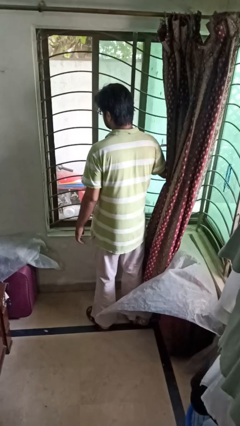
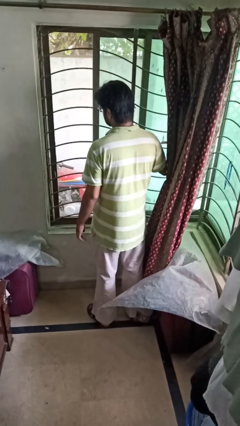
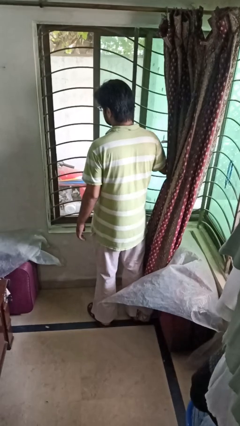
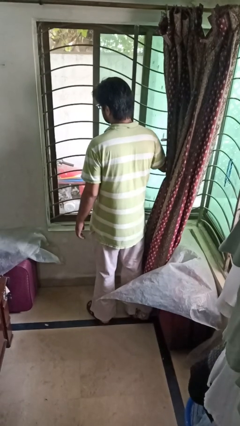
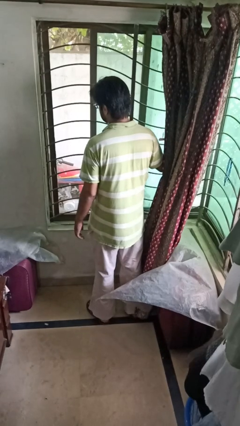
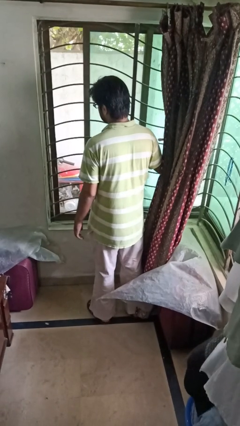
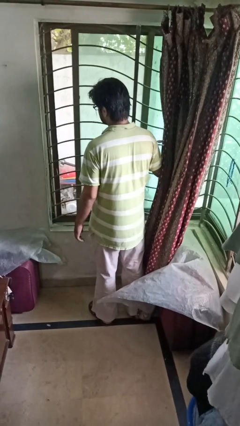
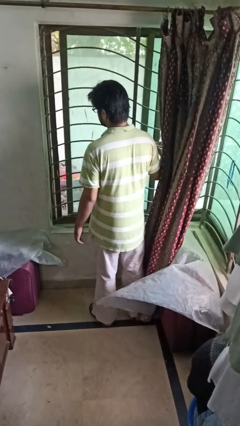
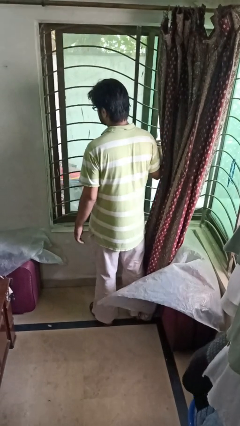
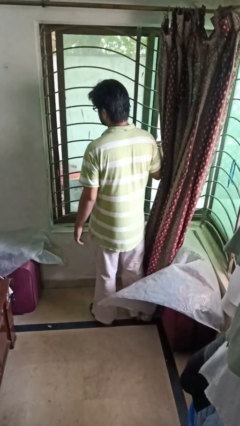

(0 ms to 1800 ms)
person closes home window

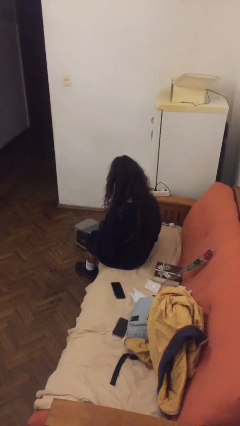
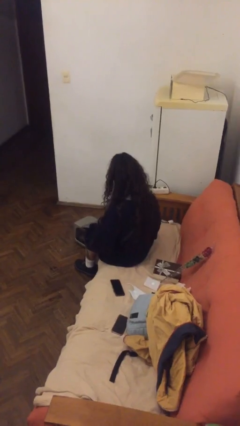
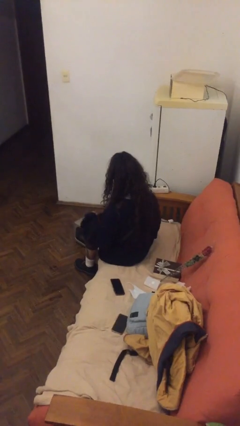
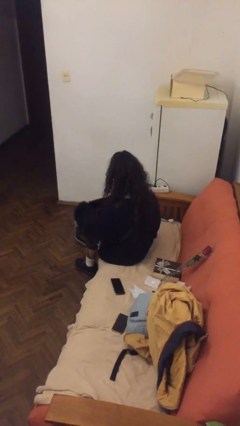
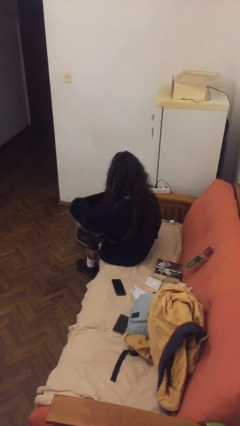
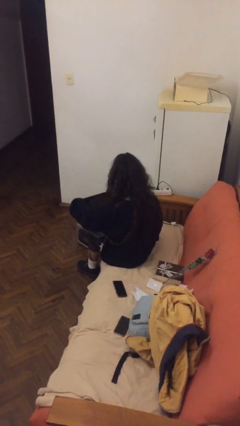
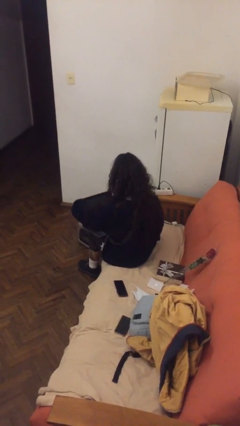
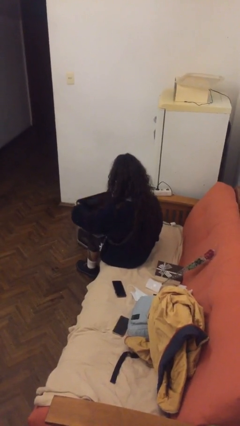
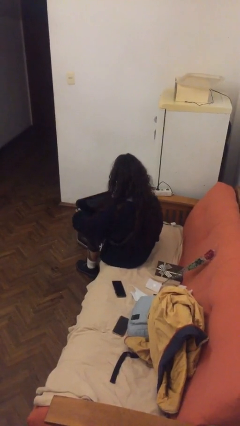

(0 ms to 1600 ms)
person opens laptop

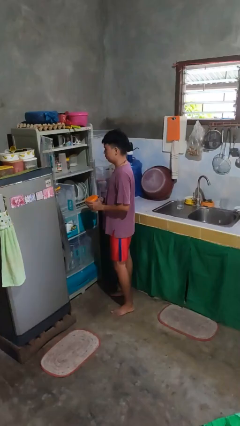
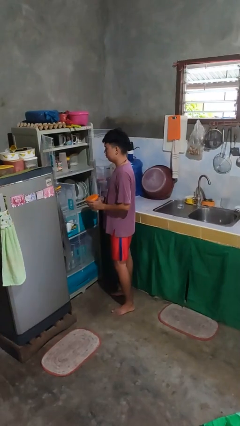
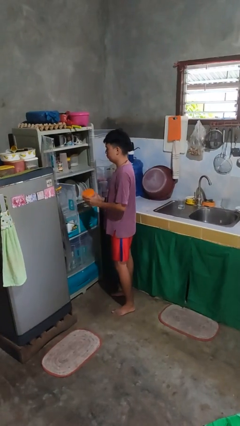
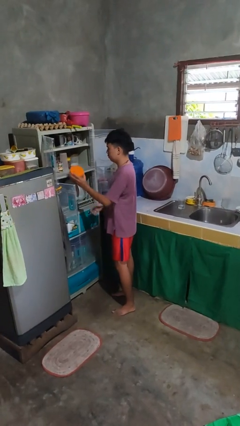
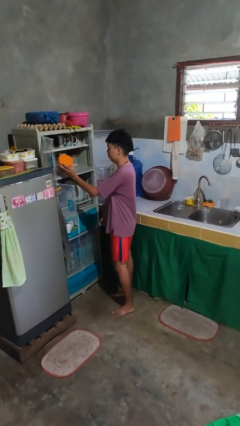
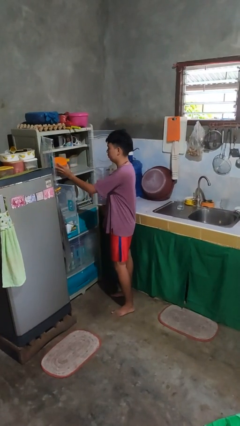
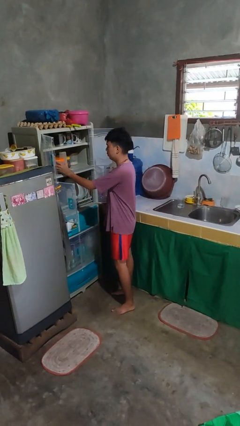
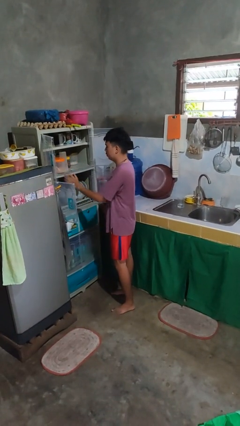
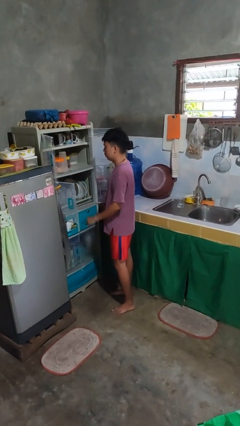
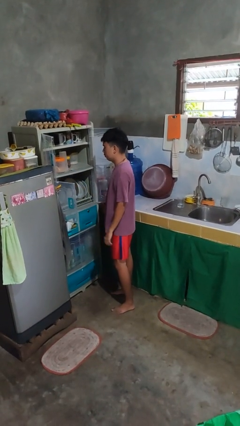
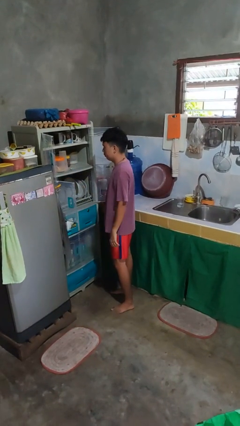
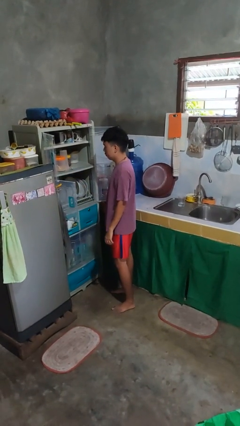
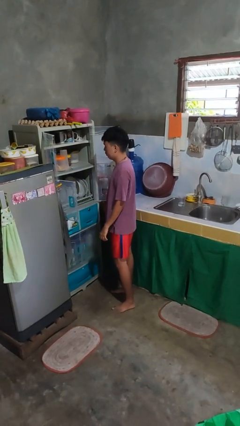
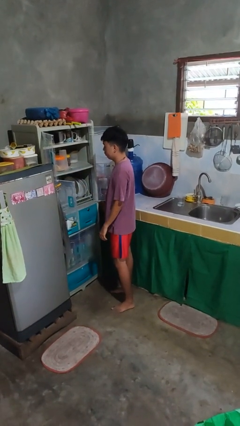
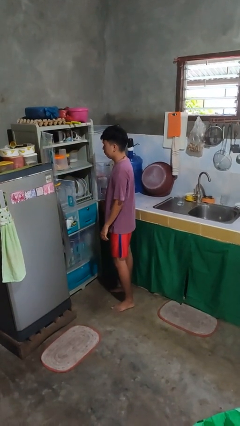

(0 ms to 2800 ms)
person puts object in cabinet

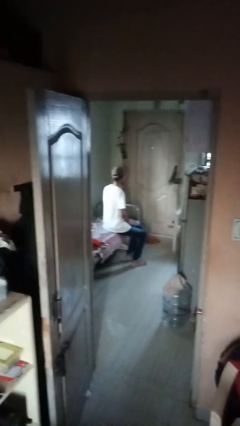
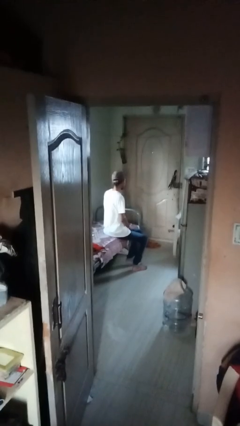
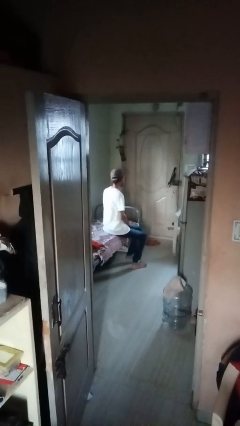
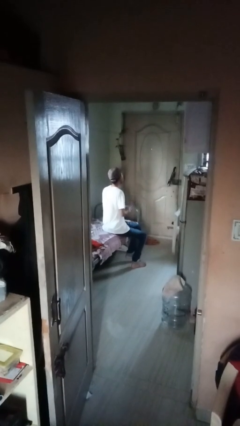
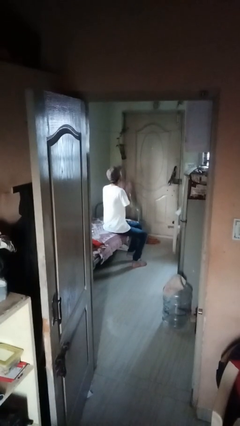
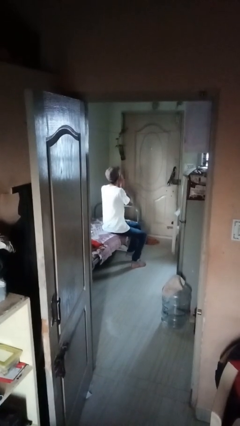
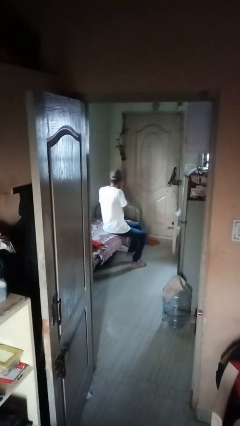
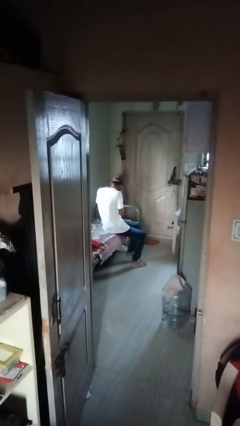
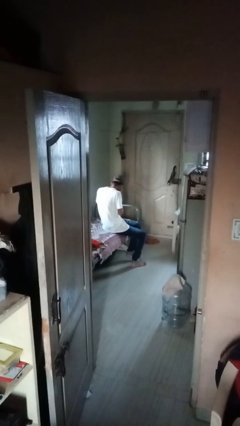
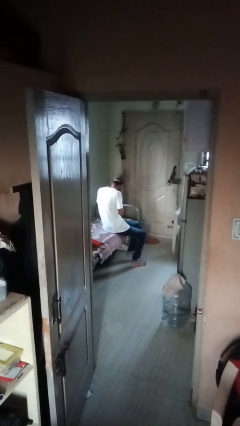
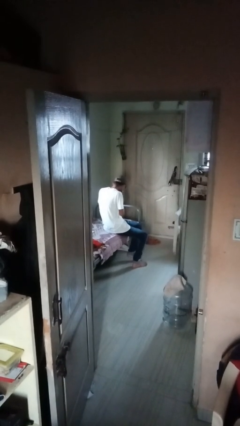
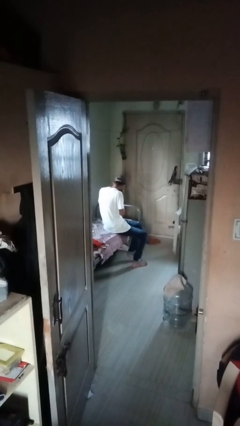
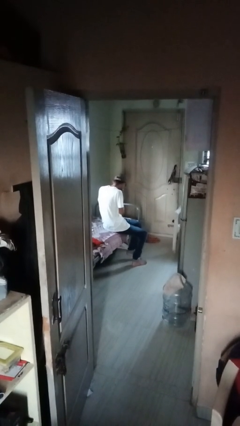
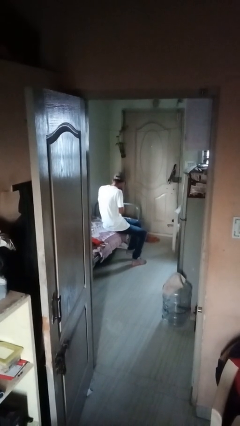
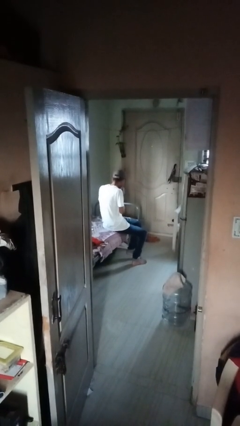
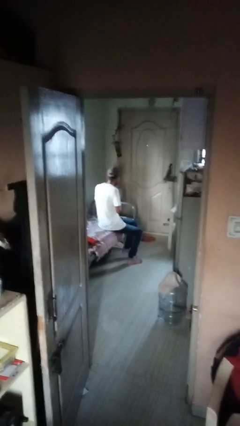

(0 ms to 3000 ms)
person sneezes into hand

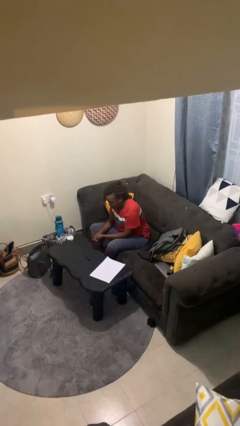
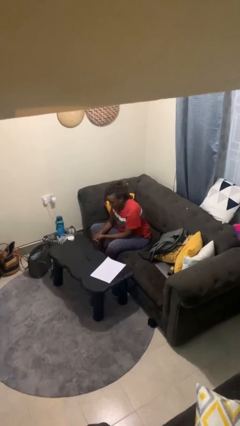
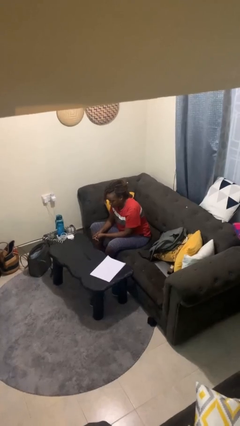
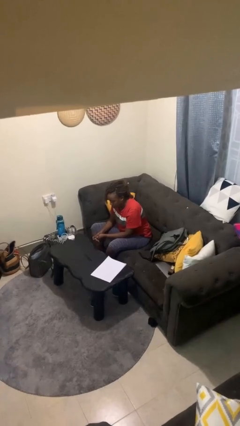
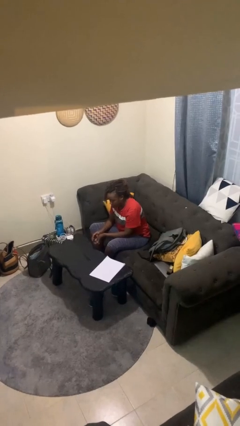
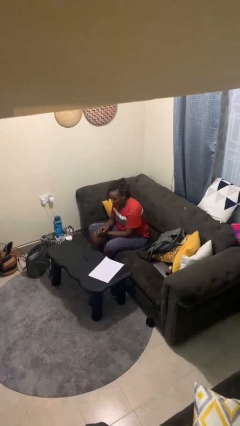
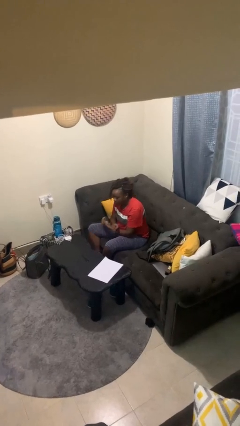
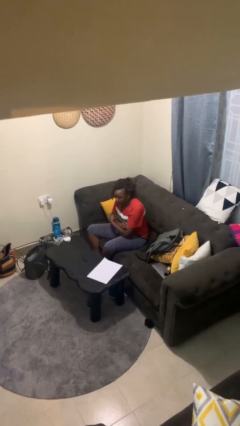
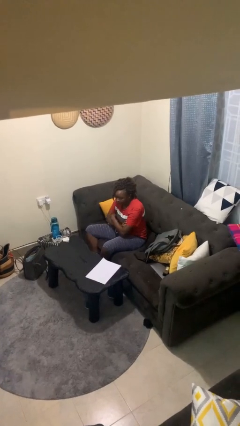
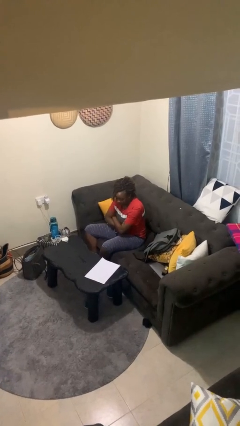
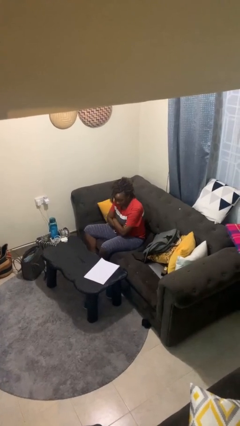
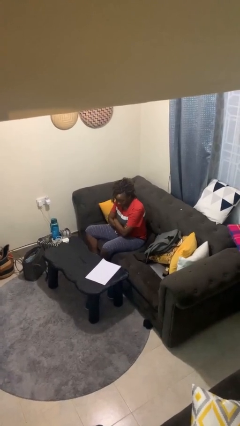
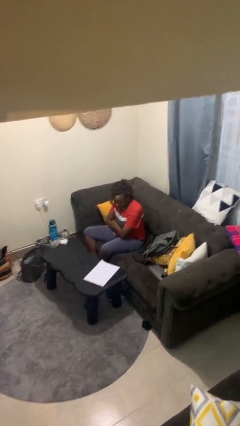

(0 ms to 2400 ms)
person crosses arms

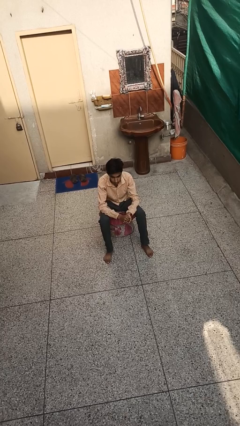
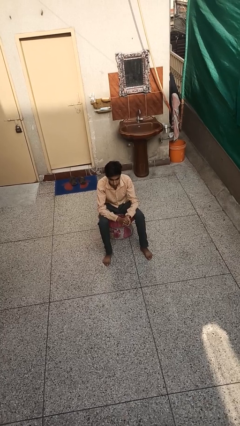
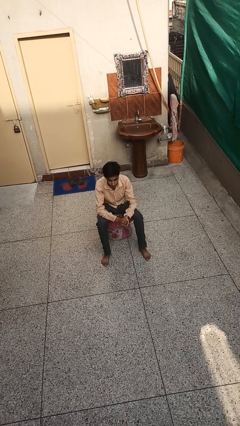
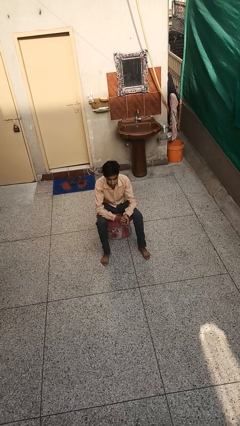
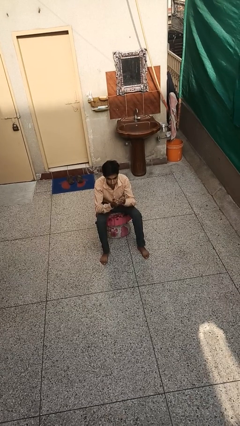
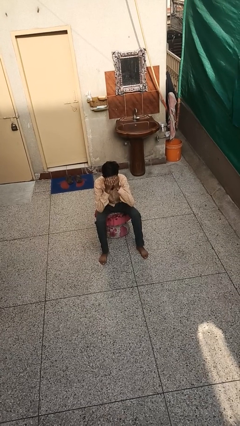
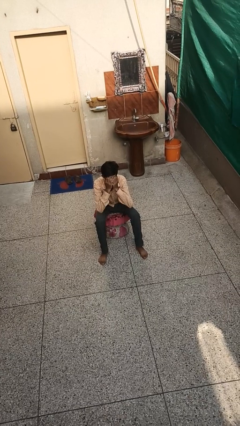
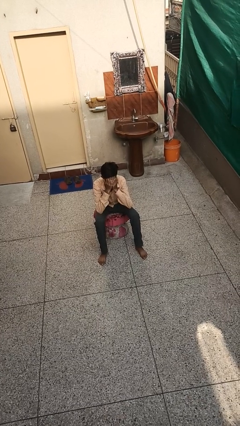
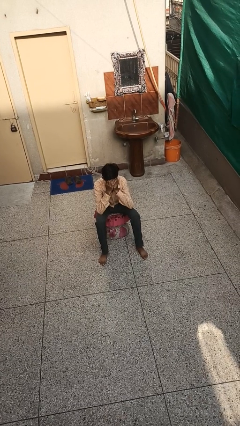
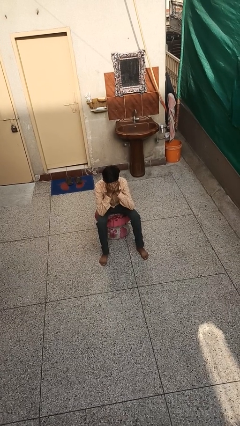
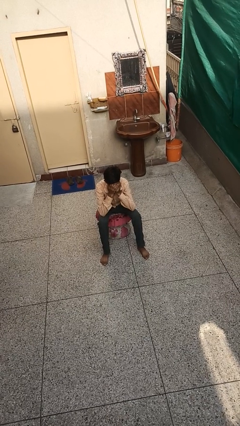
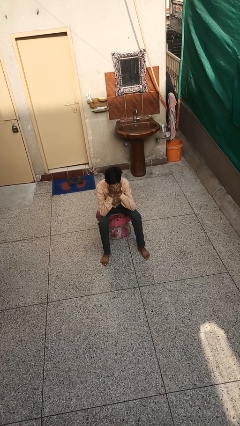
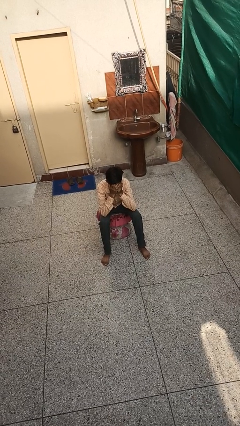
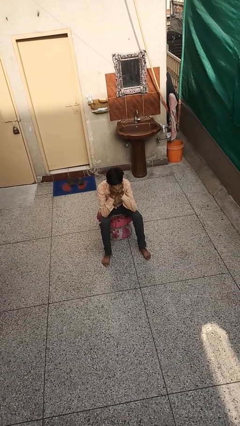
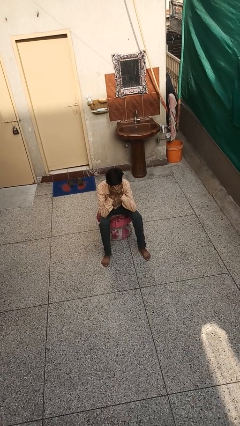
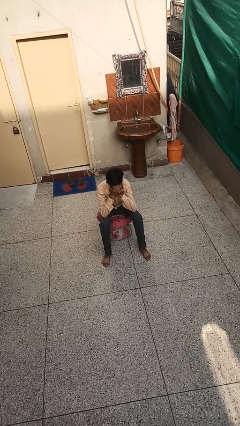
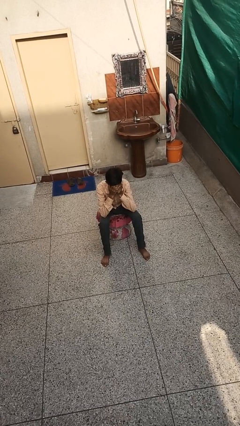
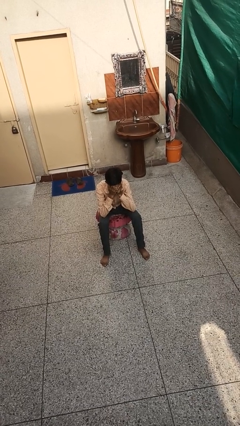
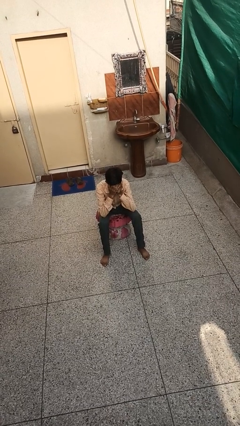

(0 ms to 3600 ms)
person covers face with hands

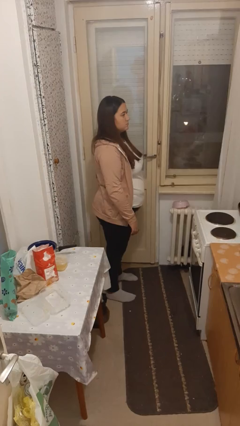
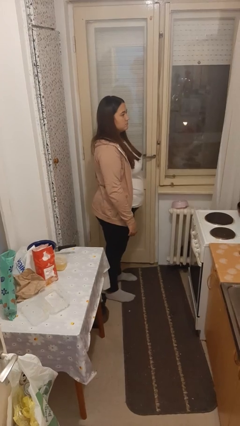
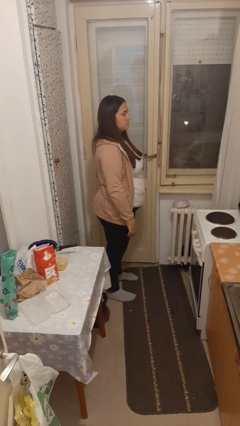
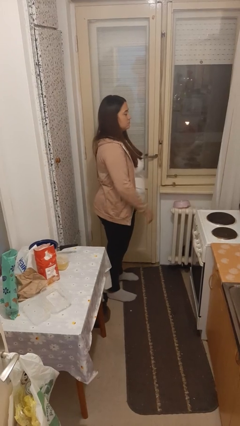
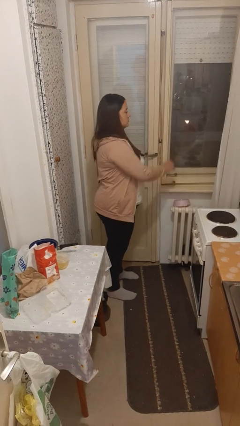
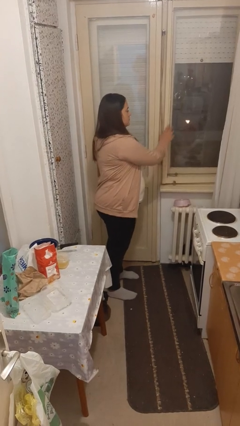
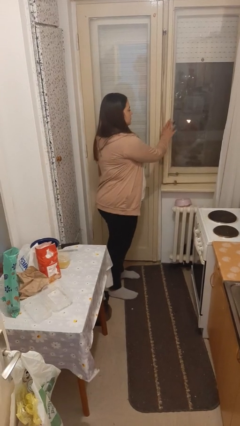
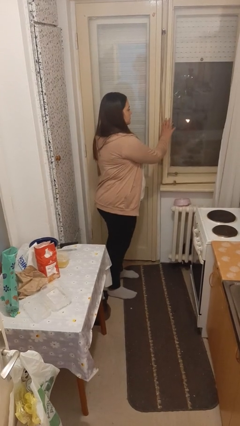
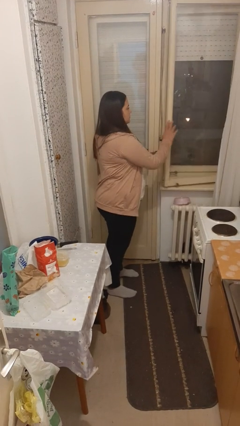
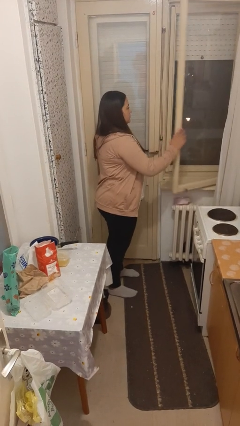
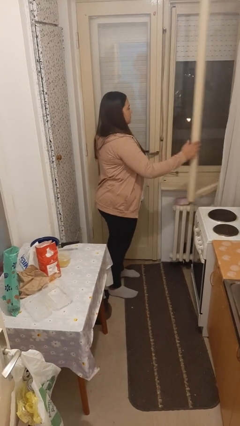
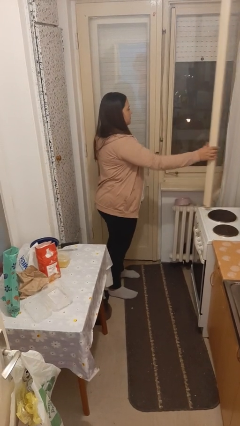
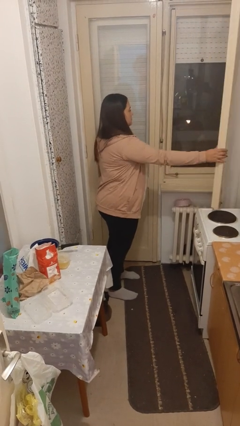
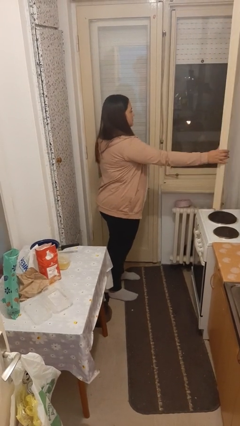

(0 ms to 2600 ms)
person opens home window
